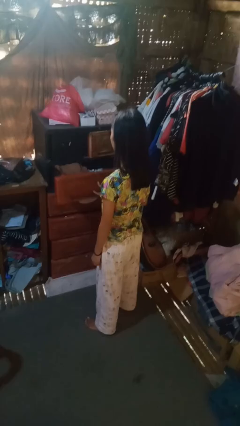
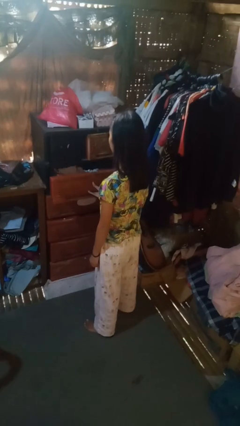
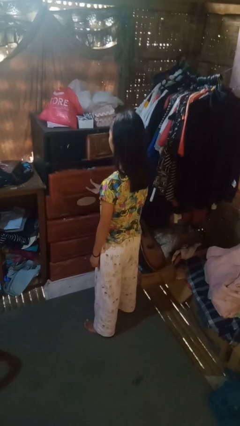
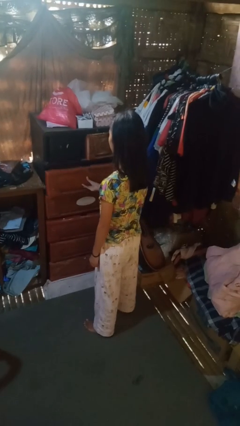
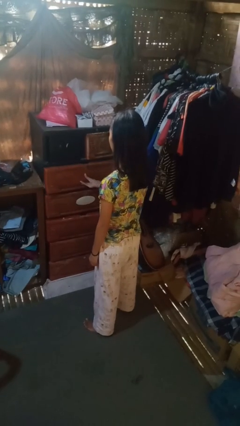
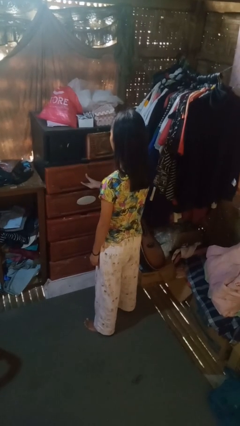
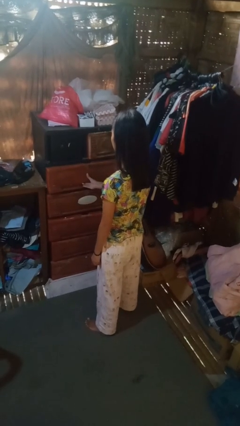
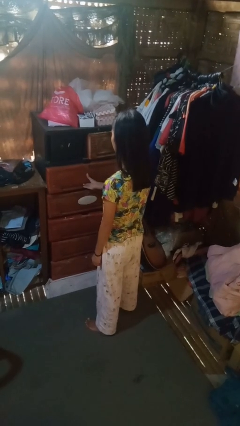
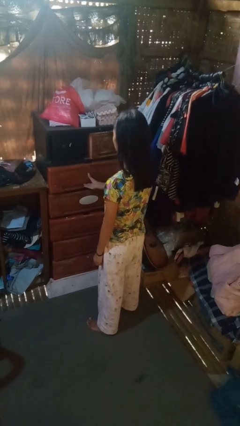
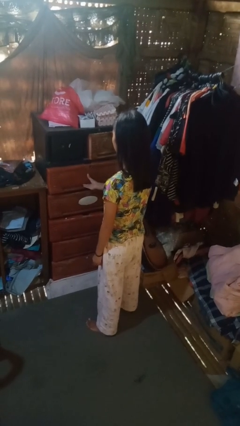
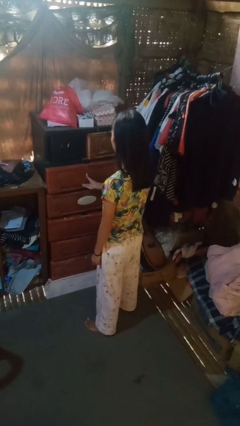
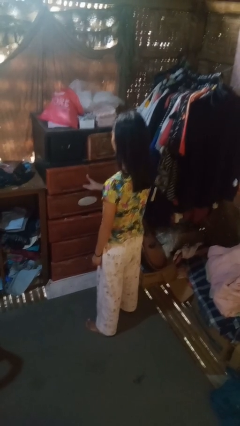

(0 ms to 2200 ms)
person closes dresser drawer

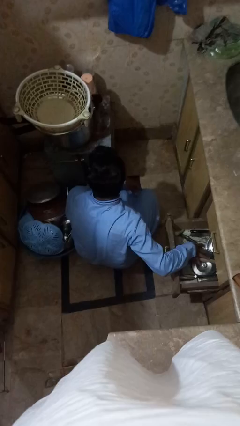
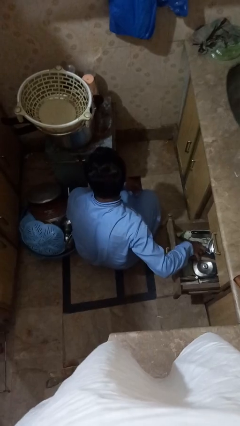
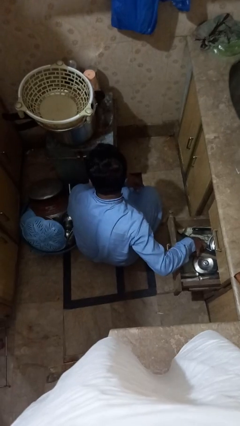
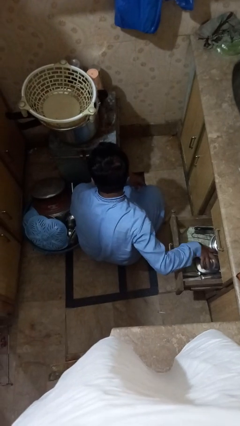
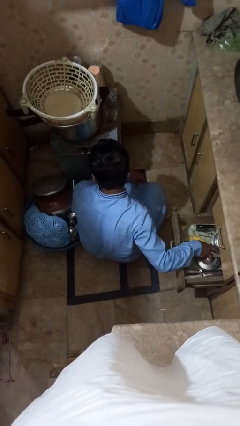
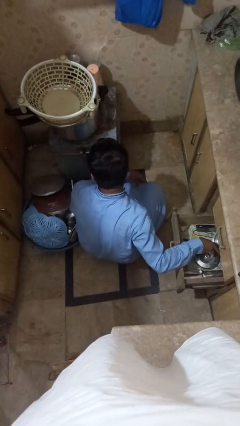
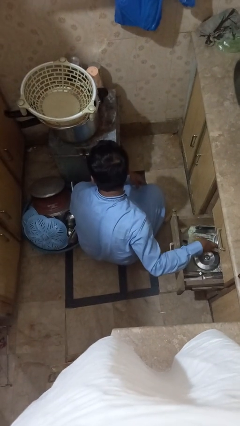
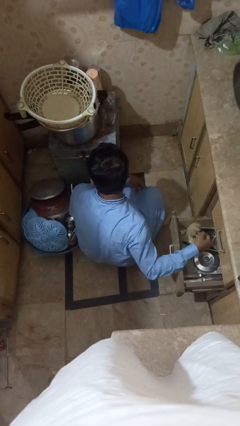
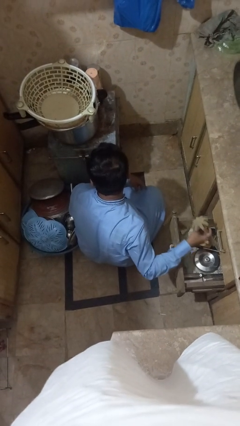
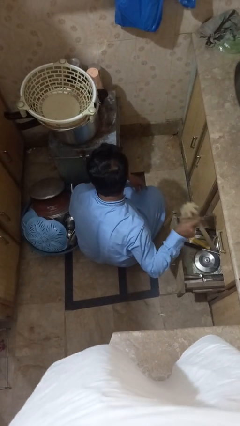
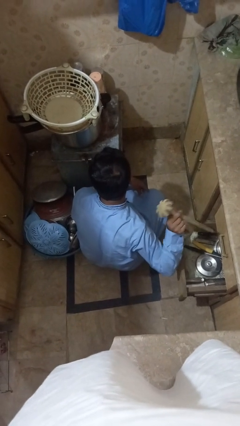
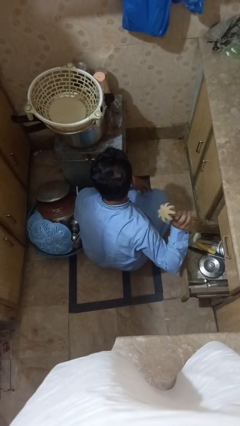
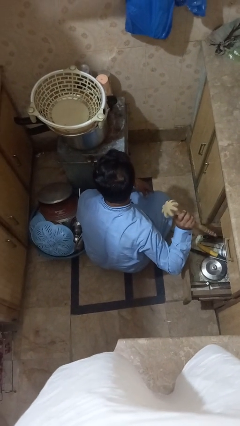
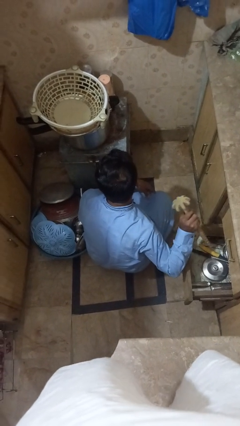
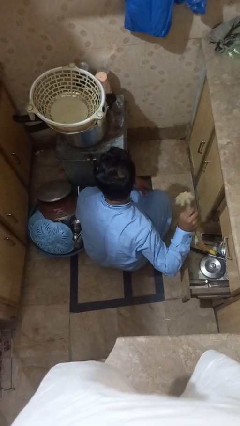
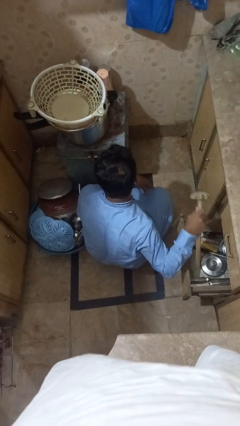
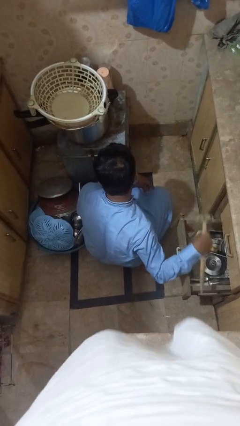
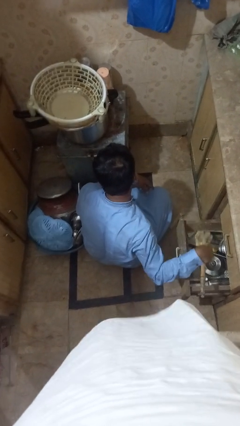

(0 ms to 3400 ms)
person searches in kitchen drawer

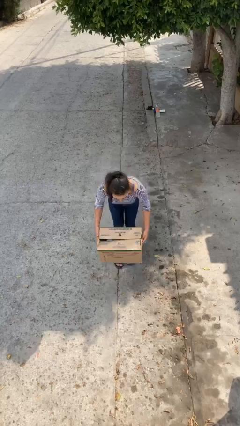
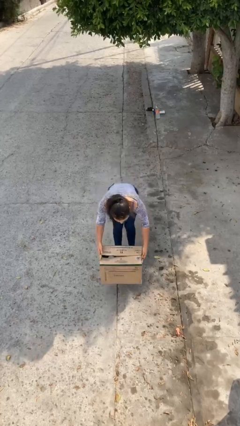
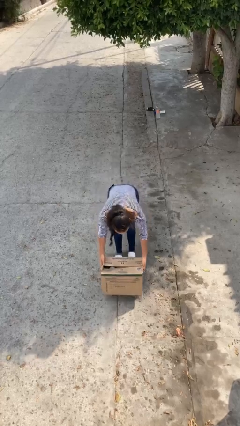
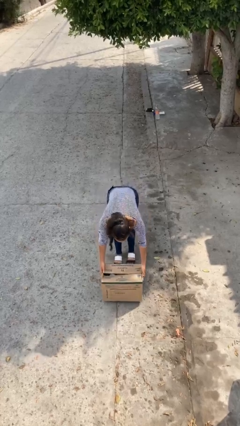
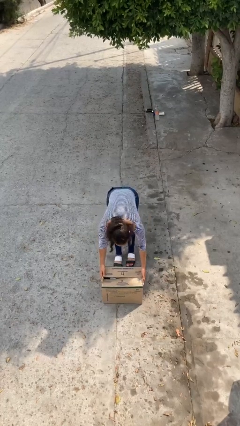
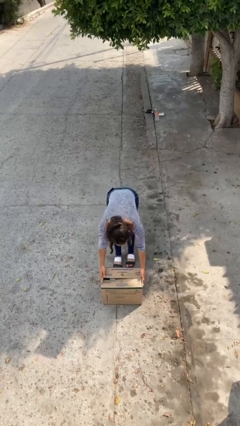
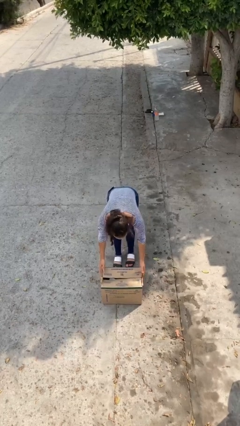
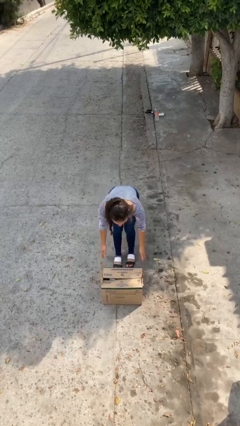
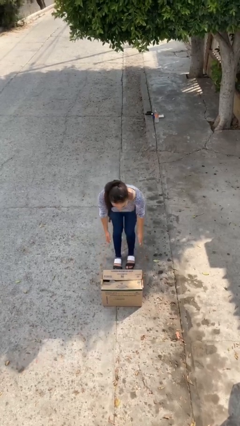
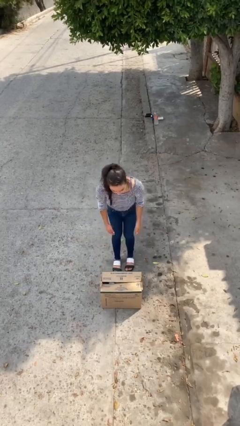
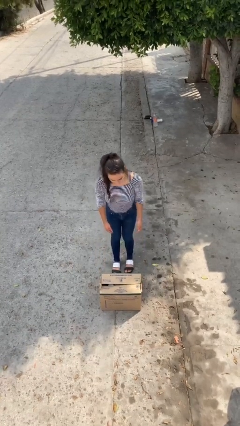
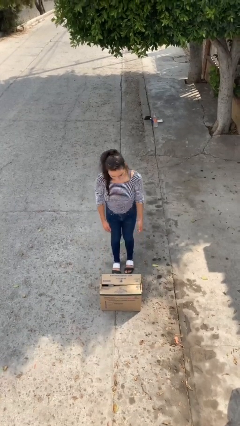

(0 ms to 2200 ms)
person puts down object on floor

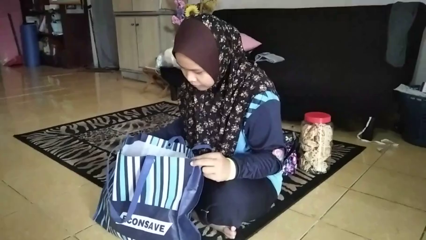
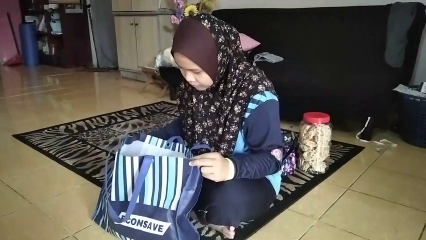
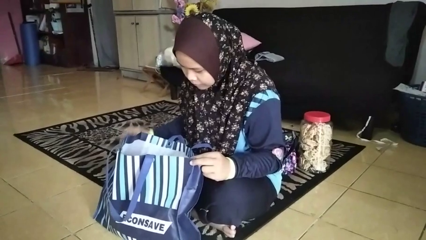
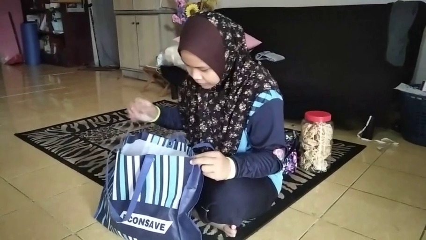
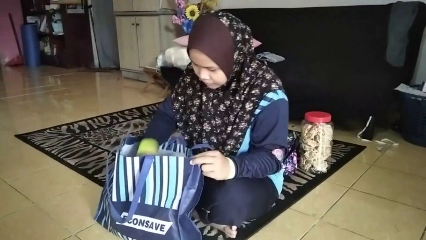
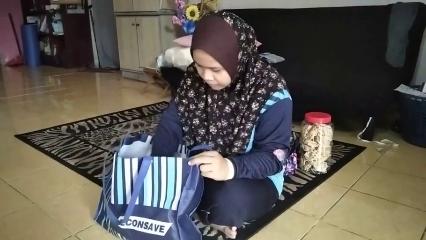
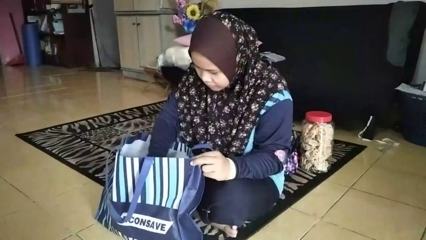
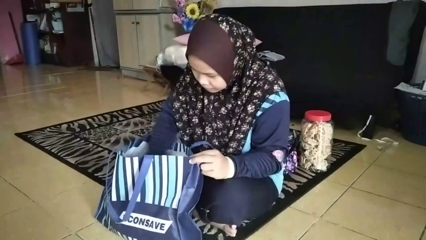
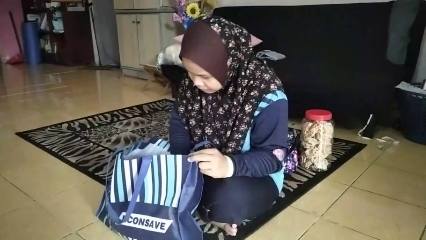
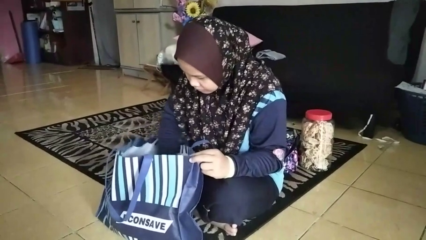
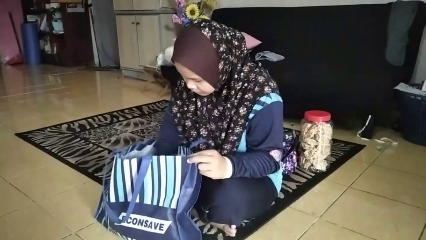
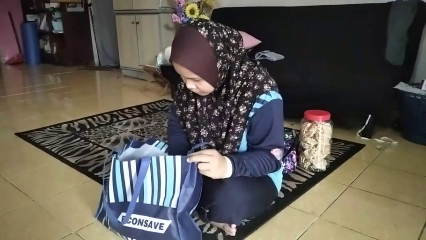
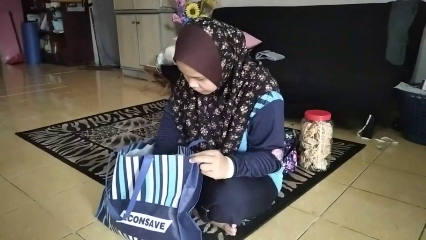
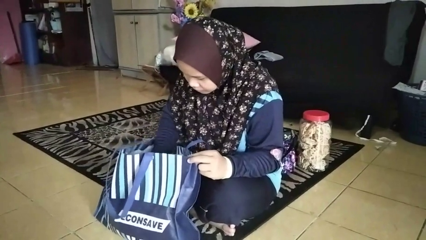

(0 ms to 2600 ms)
person searches in bag

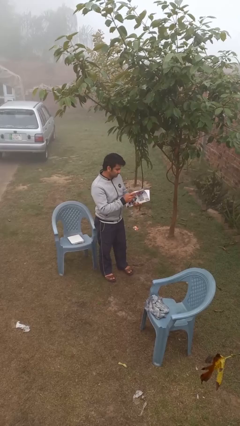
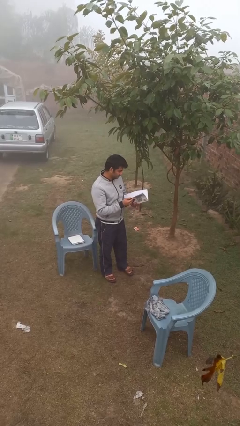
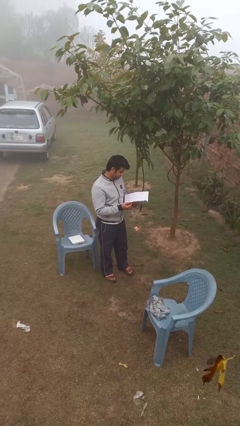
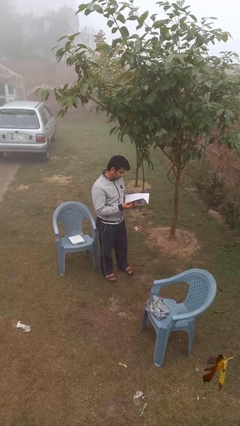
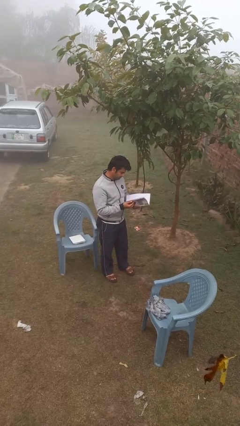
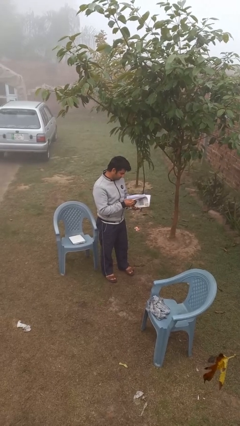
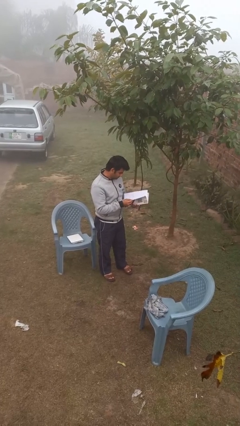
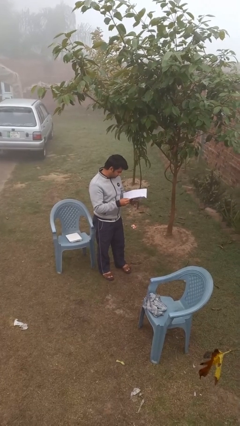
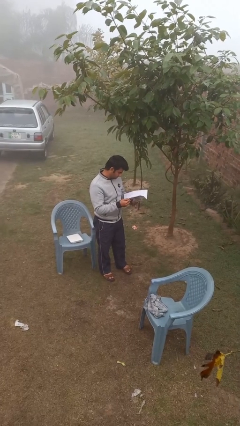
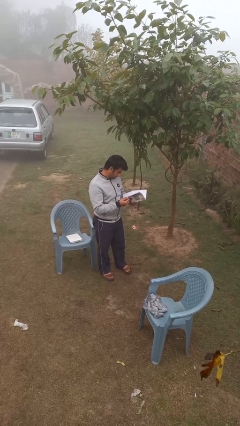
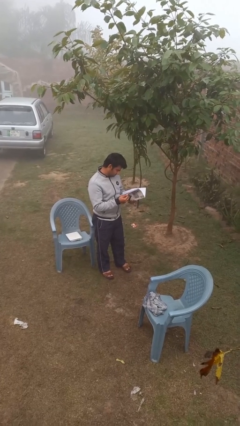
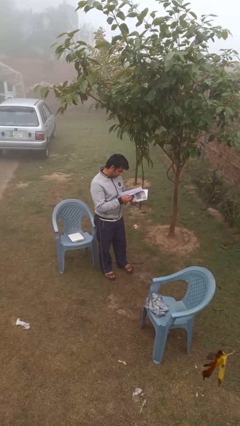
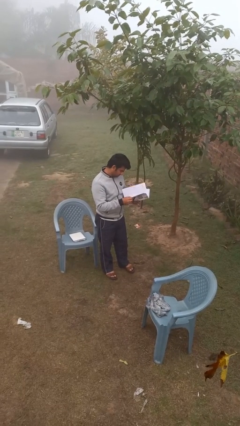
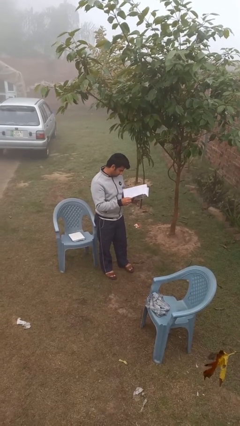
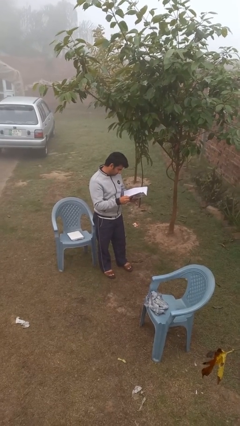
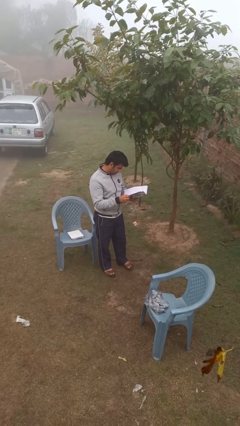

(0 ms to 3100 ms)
person reads document

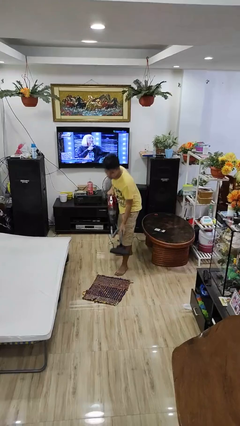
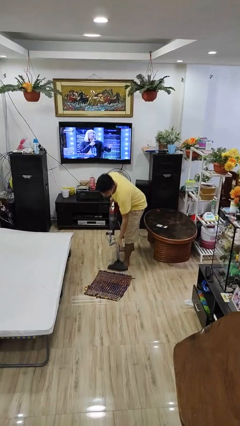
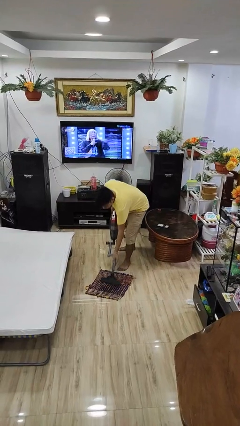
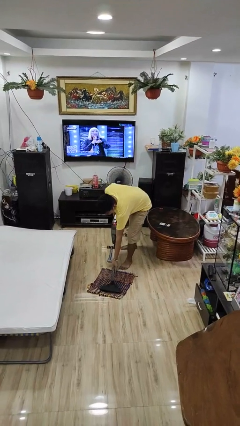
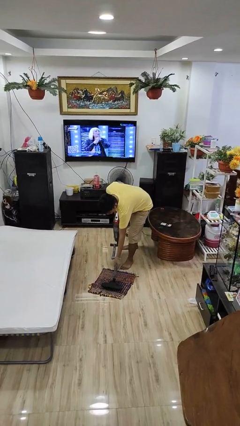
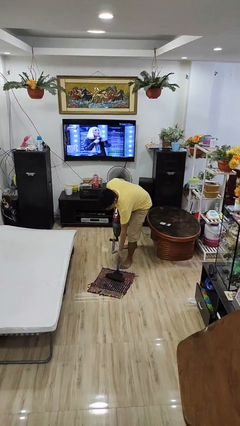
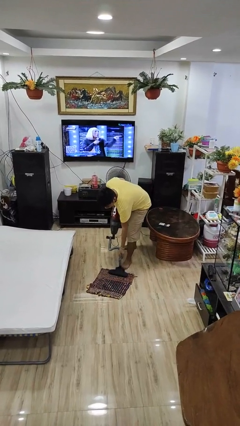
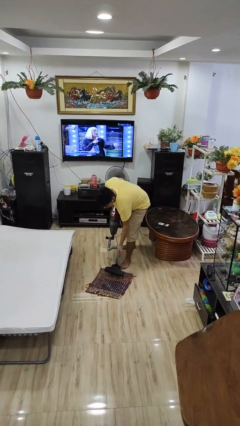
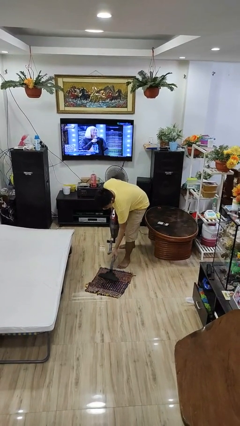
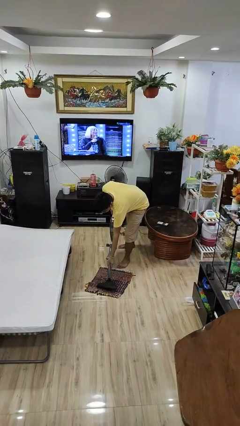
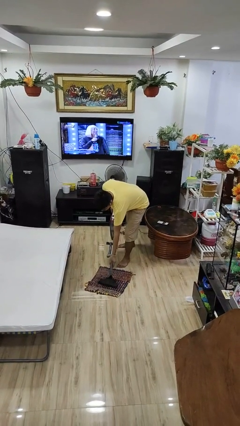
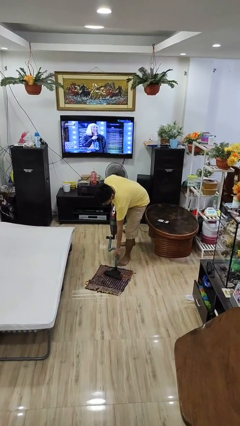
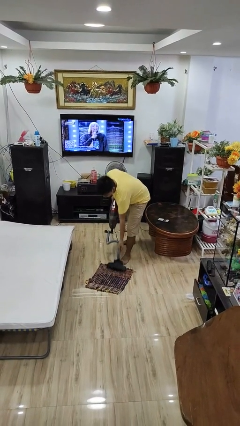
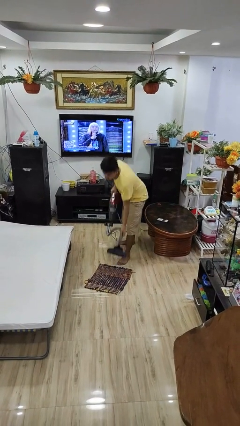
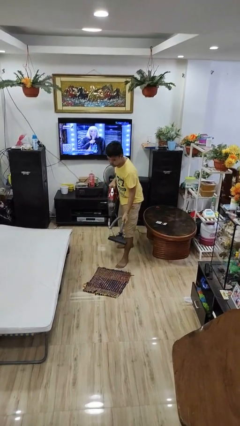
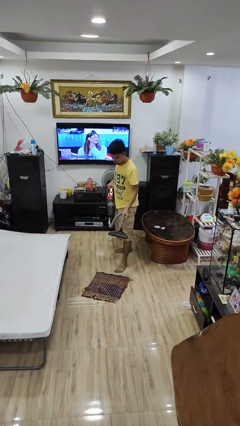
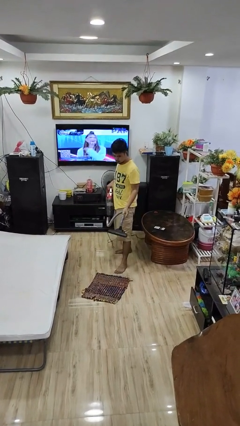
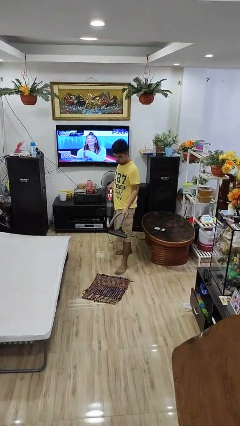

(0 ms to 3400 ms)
person vacuums carpet

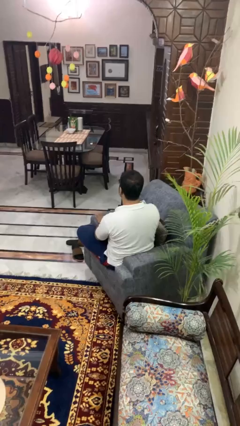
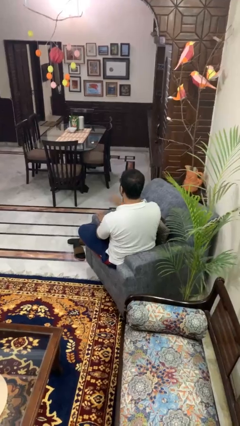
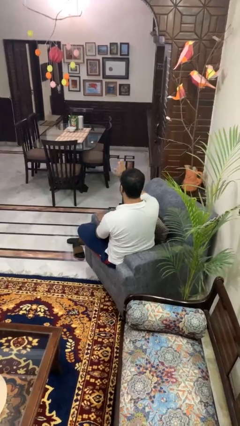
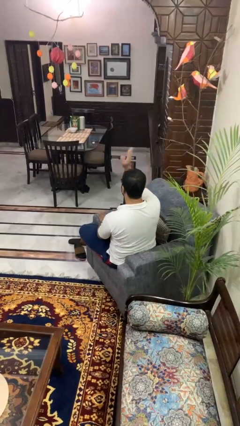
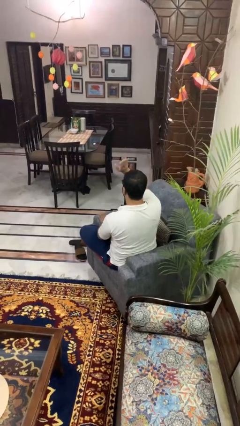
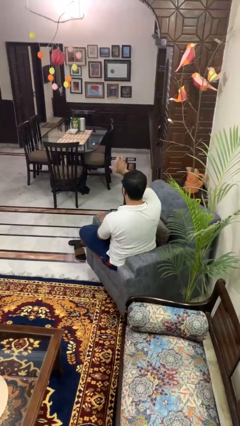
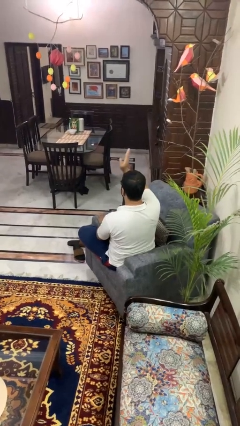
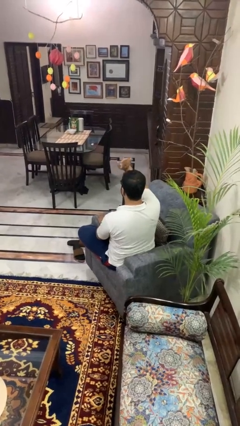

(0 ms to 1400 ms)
person waves at person
